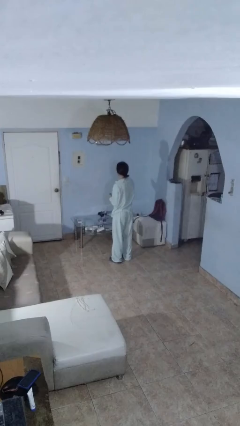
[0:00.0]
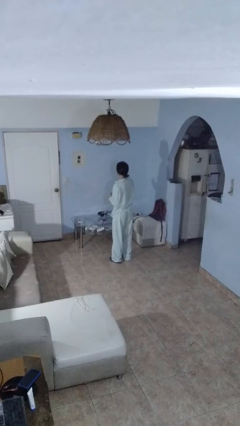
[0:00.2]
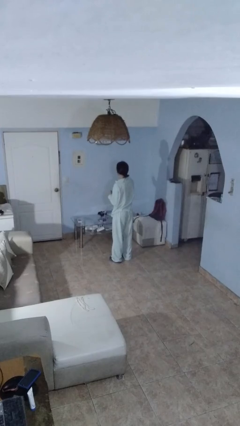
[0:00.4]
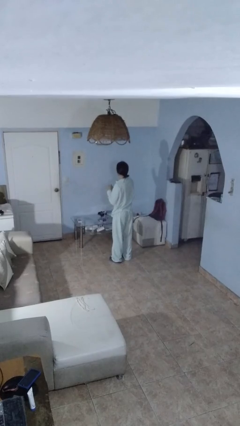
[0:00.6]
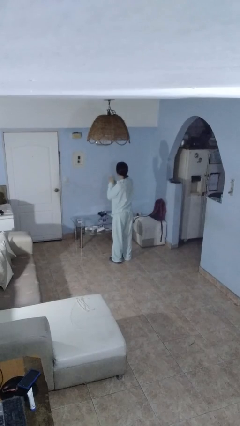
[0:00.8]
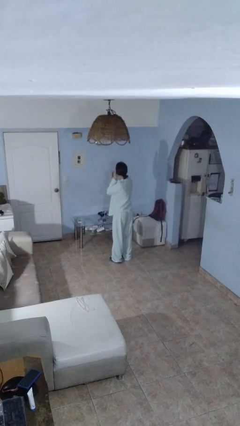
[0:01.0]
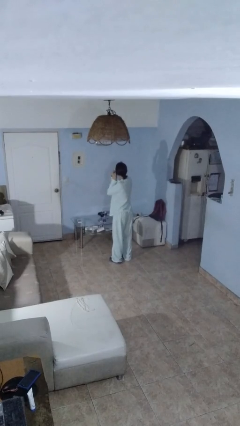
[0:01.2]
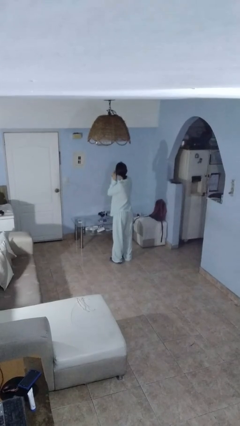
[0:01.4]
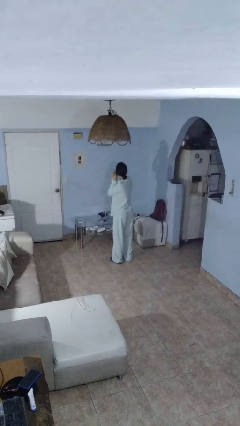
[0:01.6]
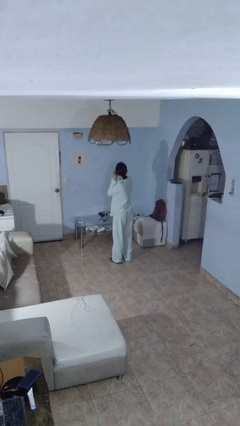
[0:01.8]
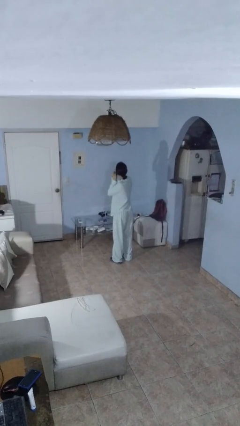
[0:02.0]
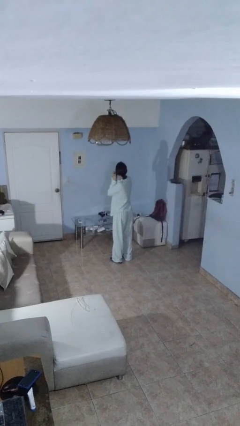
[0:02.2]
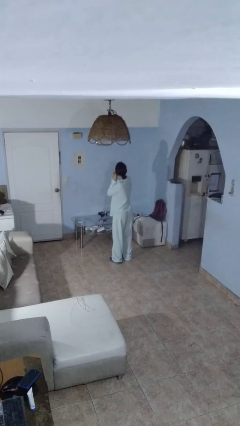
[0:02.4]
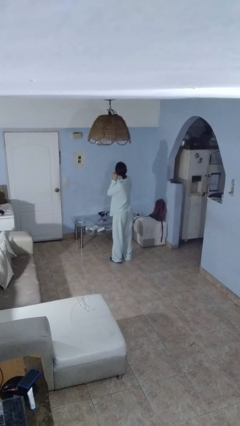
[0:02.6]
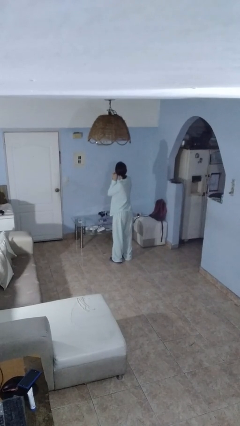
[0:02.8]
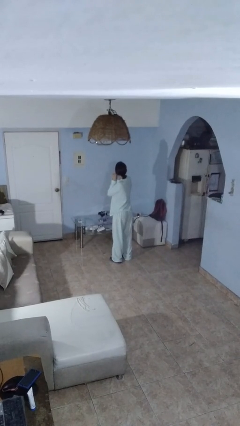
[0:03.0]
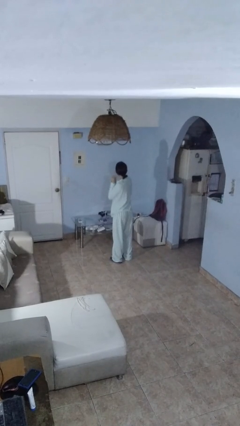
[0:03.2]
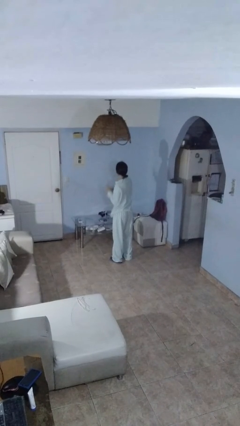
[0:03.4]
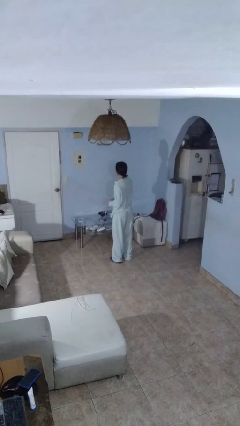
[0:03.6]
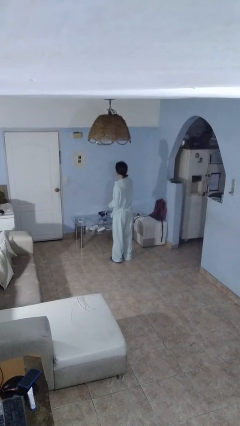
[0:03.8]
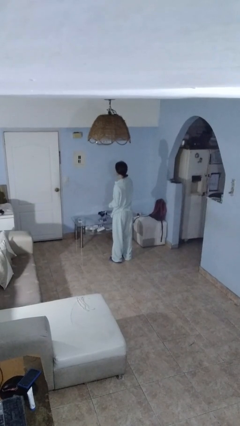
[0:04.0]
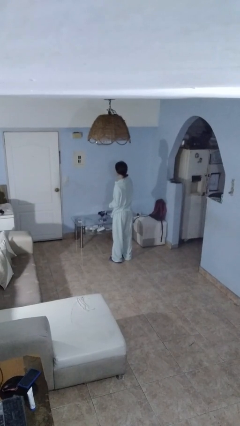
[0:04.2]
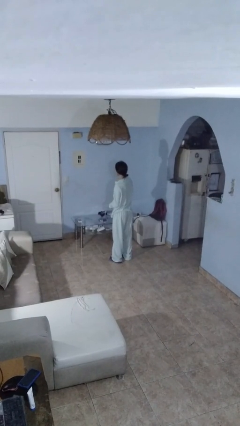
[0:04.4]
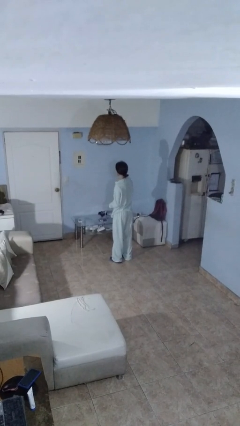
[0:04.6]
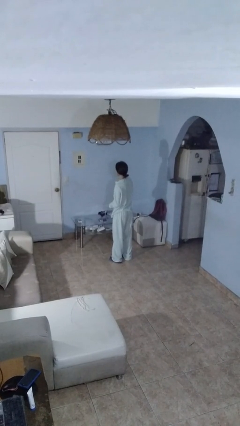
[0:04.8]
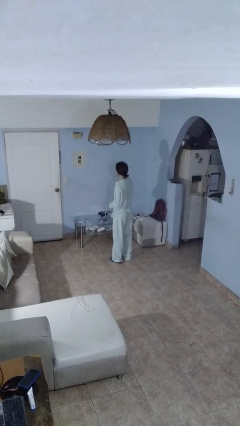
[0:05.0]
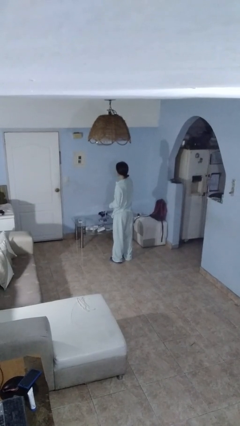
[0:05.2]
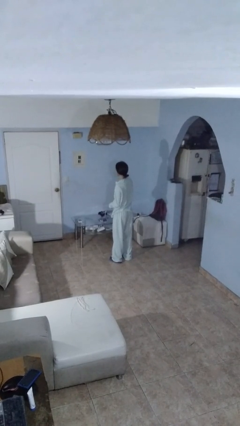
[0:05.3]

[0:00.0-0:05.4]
person puts on earrings

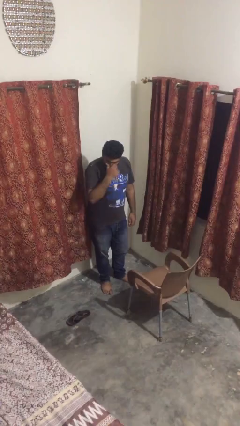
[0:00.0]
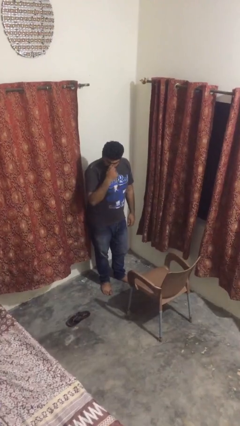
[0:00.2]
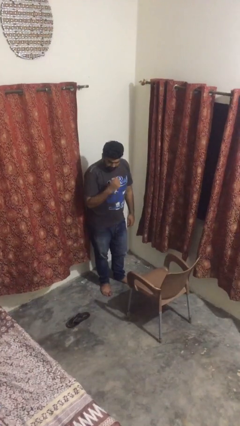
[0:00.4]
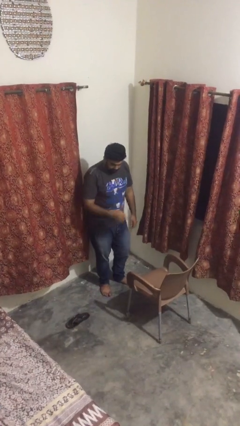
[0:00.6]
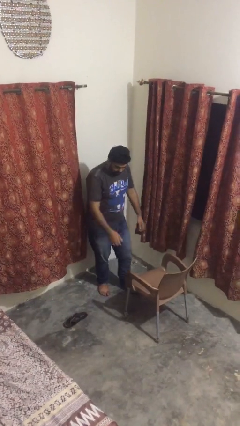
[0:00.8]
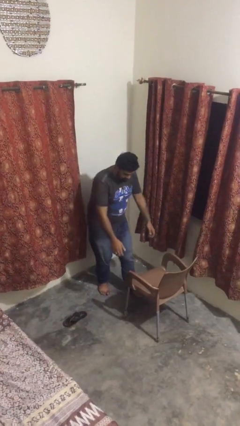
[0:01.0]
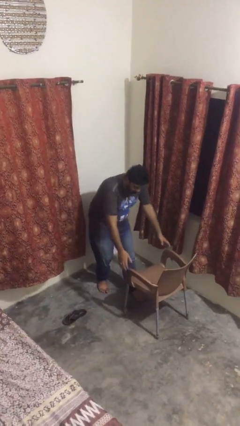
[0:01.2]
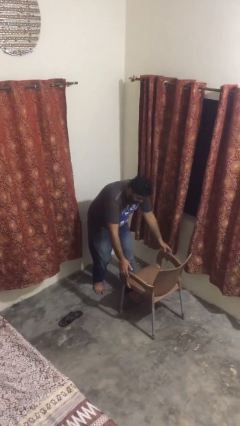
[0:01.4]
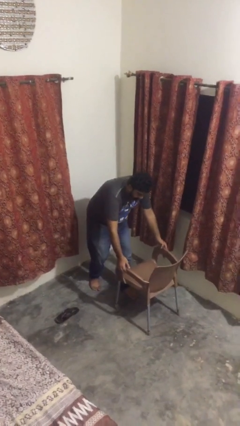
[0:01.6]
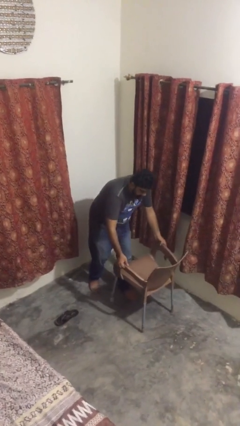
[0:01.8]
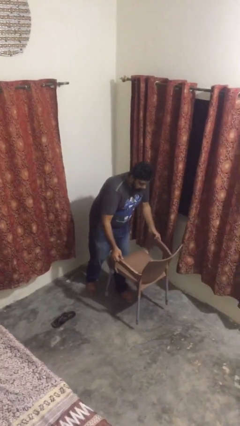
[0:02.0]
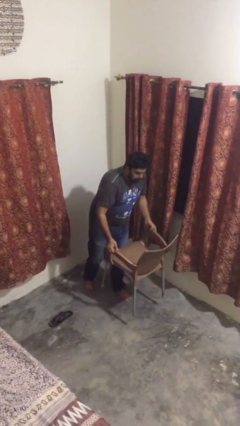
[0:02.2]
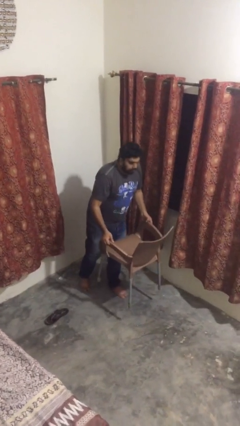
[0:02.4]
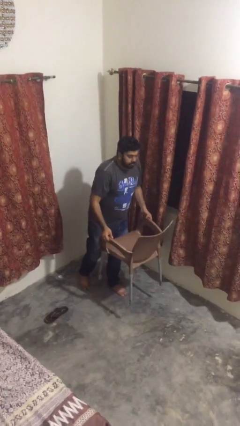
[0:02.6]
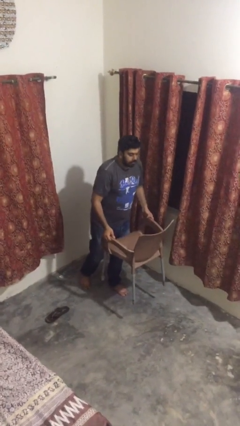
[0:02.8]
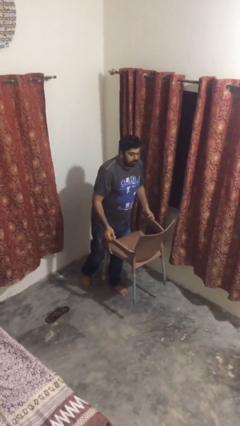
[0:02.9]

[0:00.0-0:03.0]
person picks up object from floor

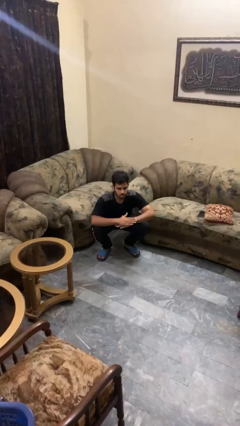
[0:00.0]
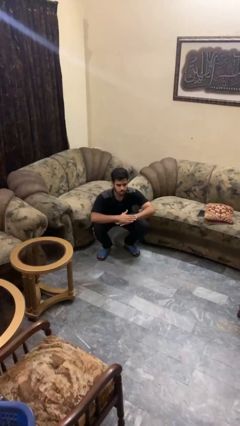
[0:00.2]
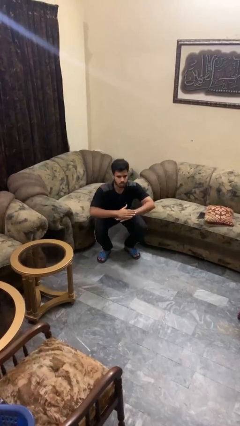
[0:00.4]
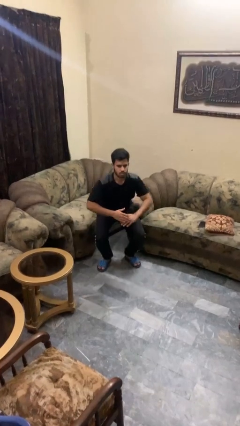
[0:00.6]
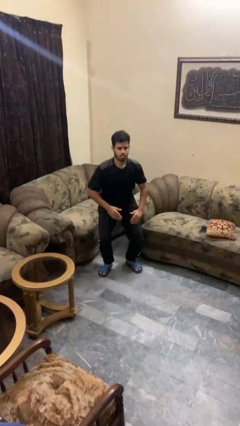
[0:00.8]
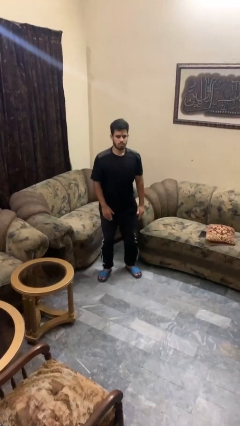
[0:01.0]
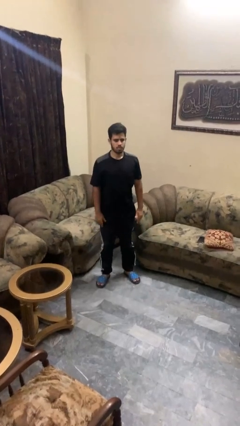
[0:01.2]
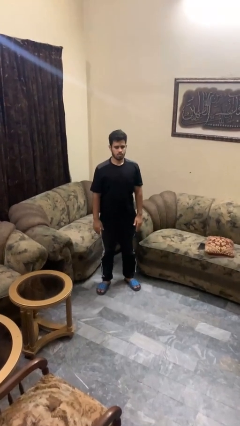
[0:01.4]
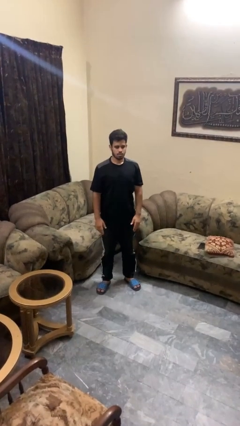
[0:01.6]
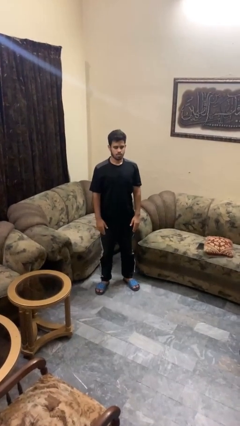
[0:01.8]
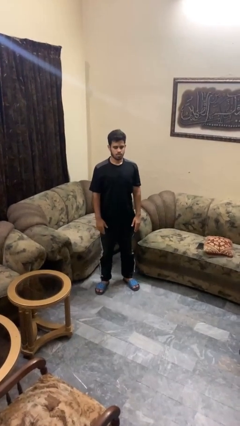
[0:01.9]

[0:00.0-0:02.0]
person stands up

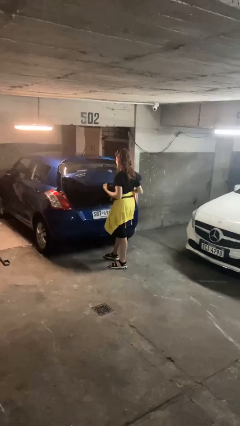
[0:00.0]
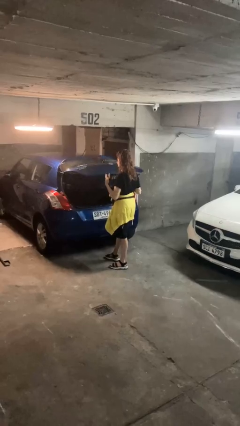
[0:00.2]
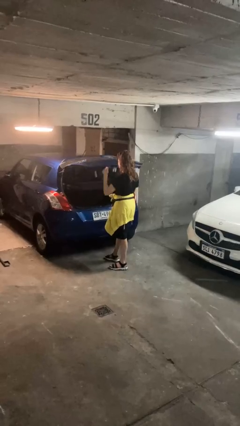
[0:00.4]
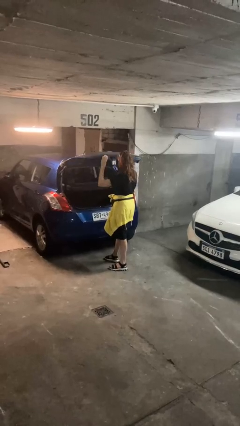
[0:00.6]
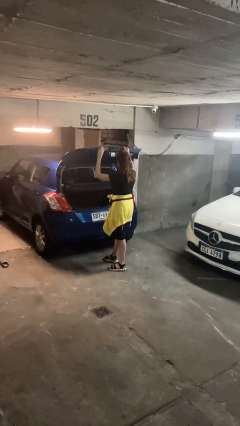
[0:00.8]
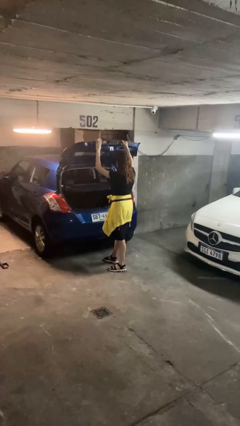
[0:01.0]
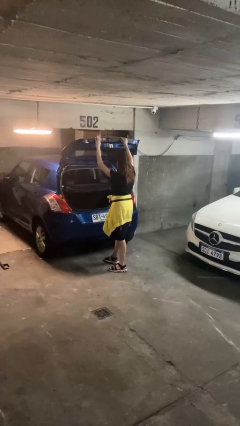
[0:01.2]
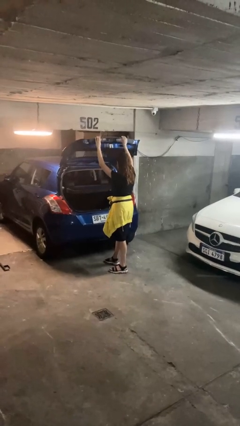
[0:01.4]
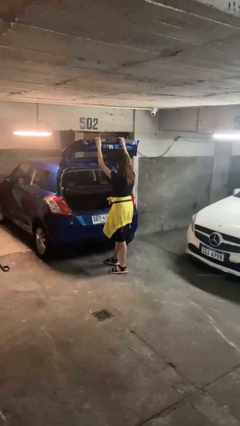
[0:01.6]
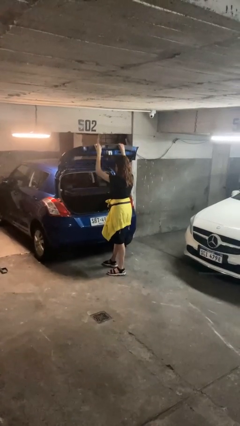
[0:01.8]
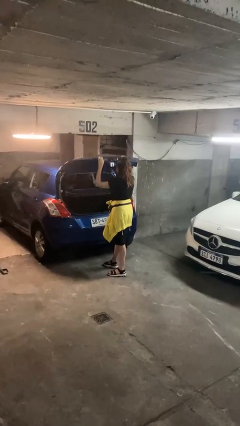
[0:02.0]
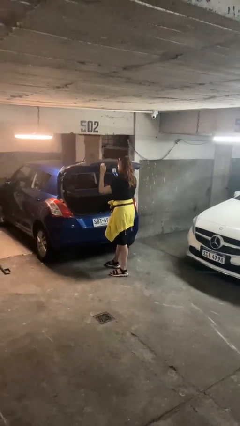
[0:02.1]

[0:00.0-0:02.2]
person opens car trunk

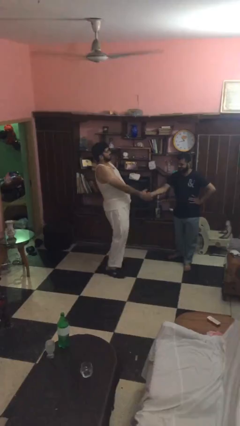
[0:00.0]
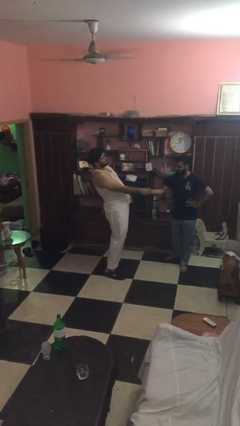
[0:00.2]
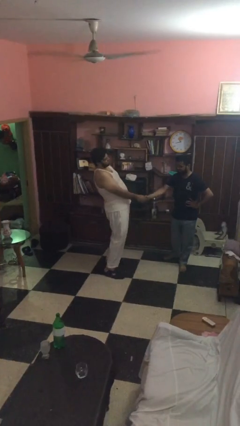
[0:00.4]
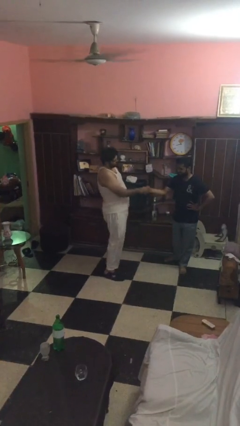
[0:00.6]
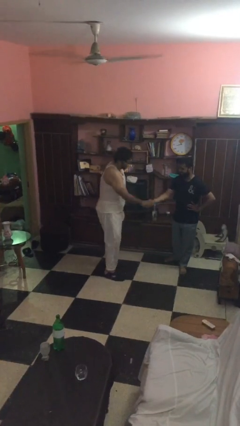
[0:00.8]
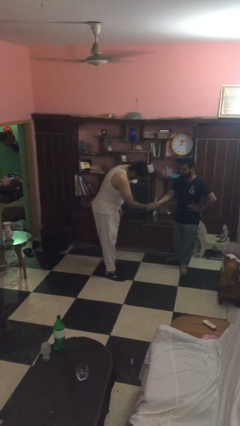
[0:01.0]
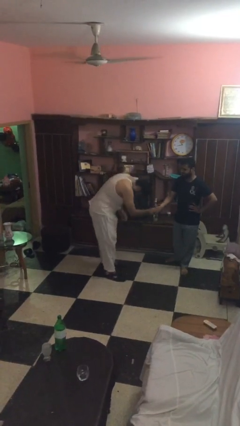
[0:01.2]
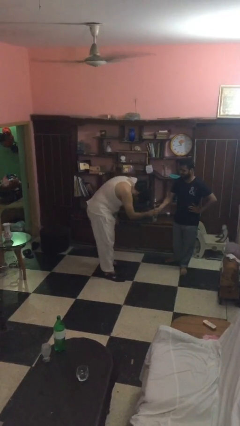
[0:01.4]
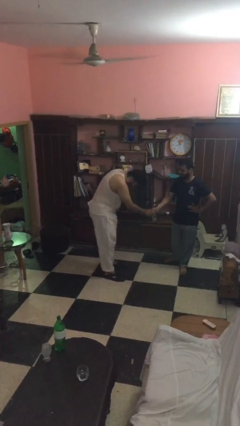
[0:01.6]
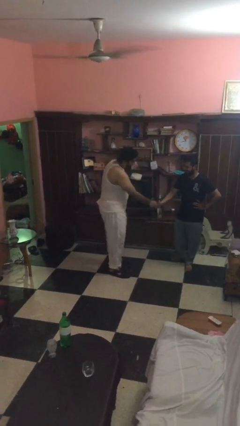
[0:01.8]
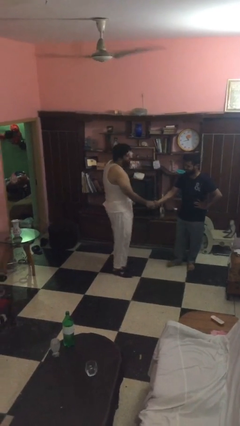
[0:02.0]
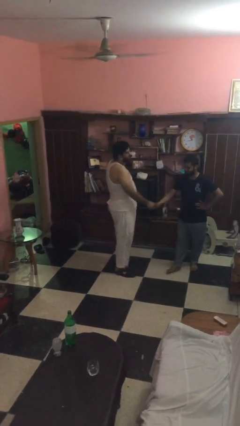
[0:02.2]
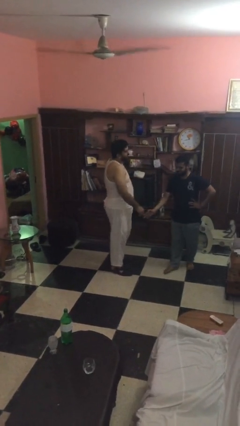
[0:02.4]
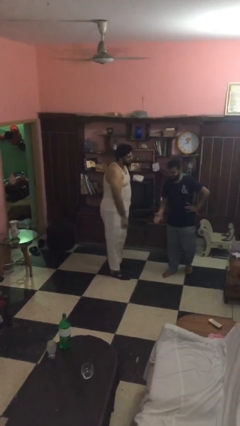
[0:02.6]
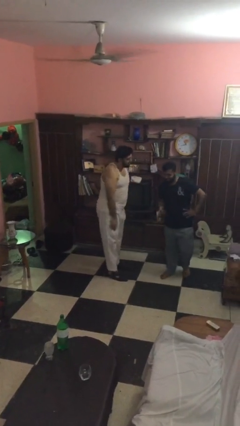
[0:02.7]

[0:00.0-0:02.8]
person shakes hand

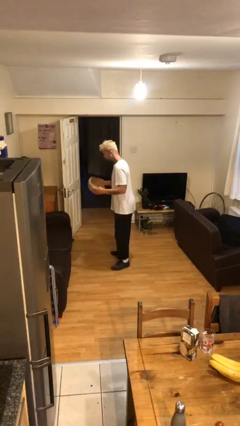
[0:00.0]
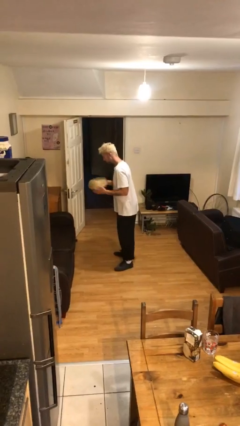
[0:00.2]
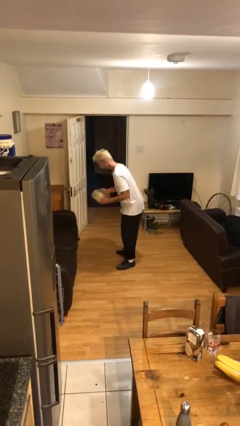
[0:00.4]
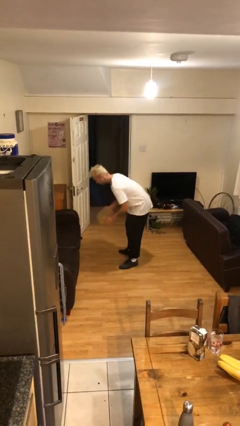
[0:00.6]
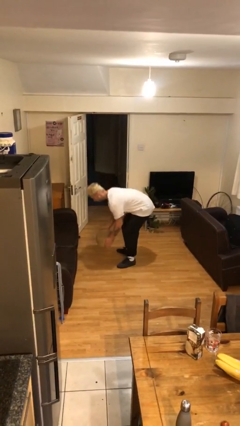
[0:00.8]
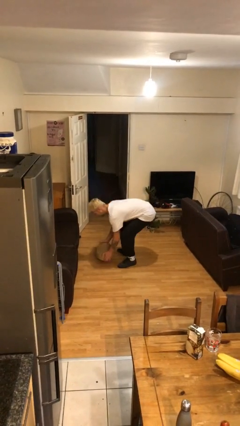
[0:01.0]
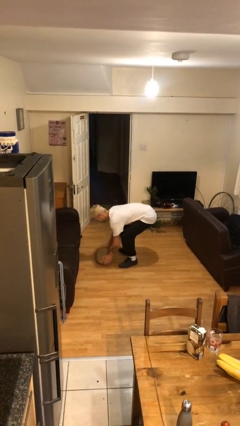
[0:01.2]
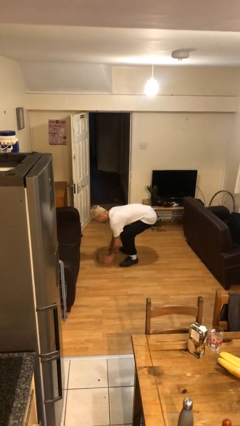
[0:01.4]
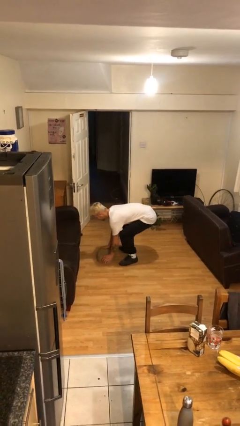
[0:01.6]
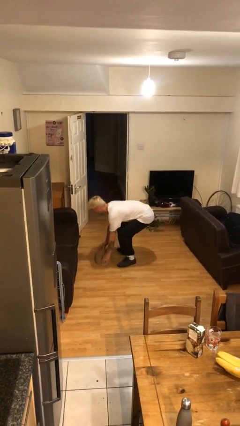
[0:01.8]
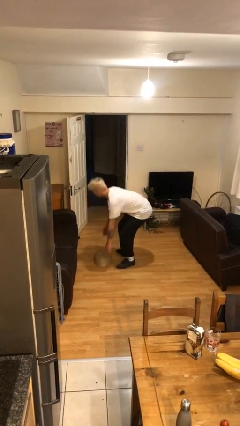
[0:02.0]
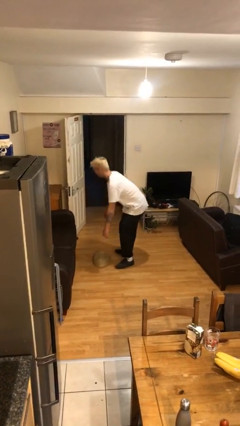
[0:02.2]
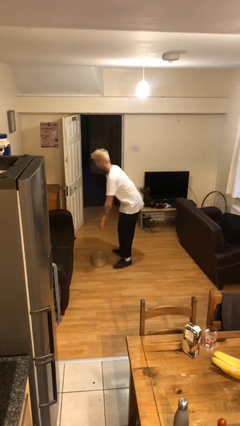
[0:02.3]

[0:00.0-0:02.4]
person puts down object on floor
